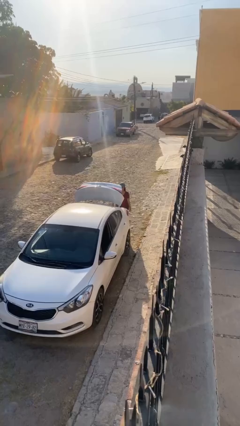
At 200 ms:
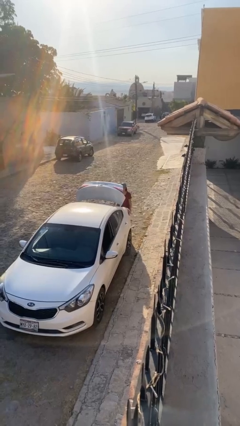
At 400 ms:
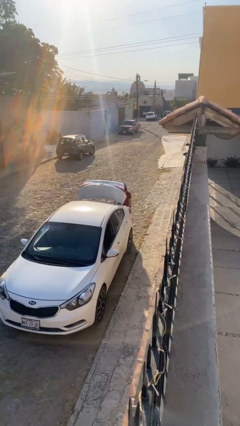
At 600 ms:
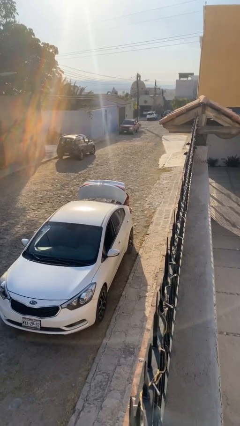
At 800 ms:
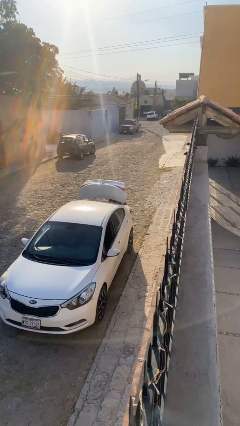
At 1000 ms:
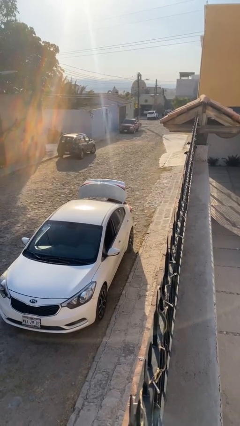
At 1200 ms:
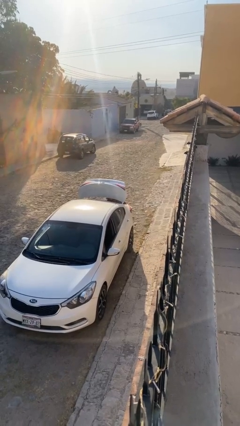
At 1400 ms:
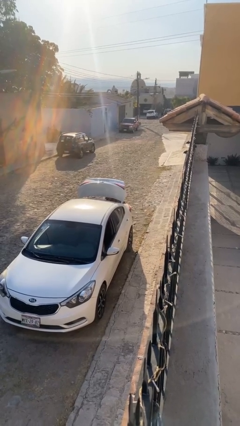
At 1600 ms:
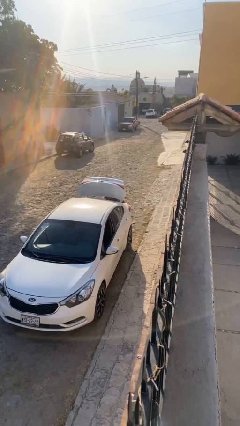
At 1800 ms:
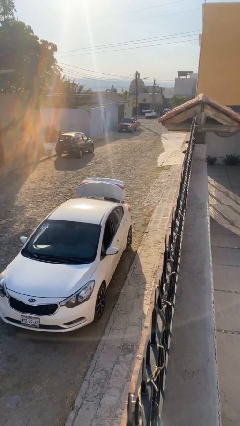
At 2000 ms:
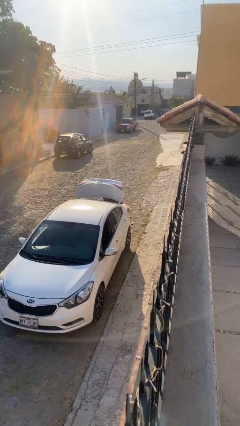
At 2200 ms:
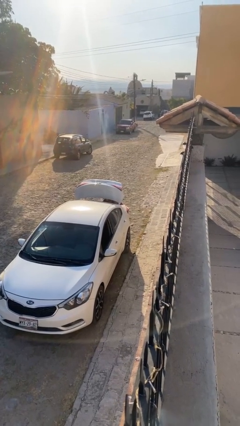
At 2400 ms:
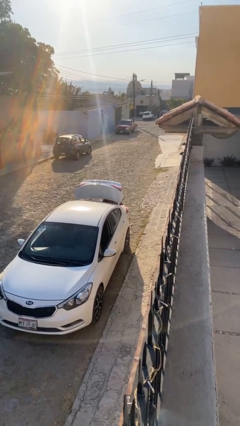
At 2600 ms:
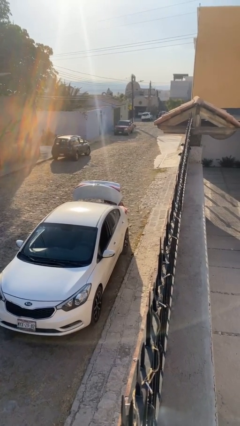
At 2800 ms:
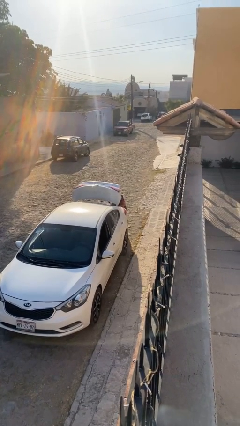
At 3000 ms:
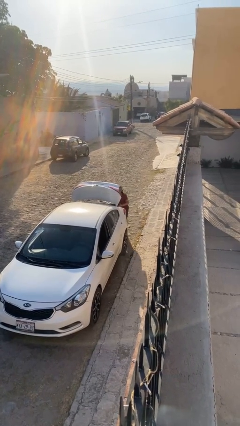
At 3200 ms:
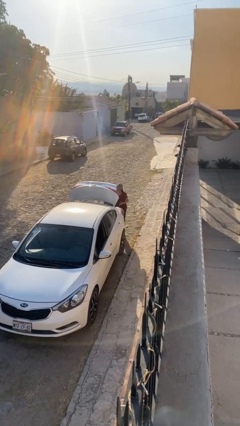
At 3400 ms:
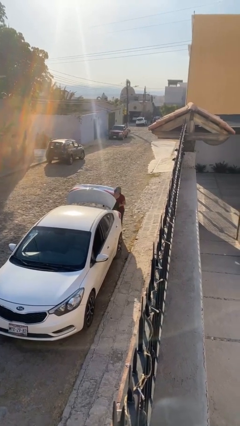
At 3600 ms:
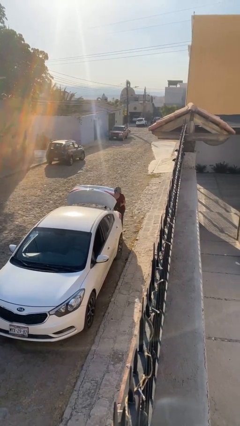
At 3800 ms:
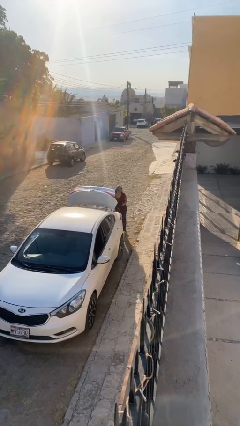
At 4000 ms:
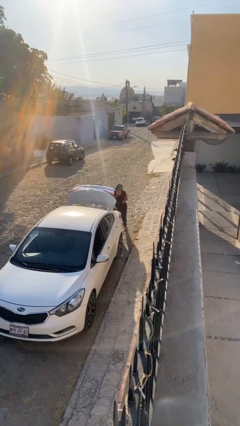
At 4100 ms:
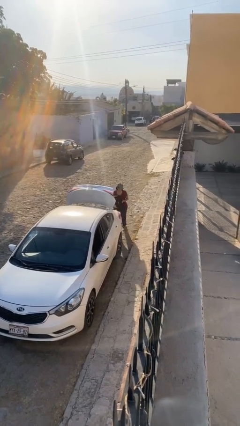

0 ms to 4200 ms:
person unloads car

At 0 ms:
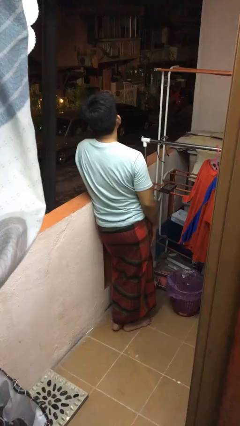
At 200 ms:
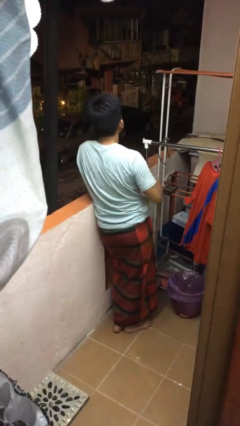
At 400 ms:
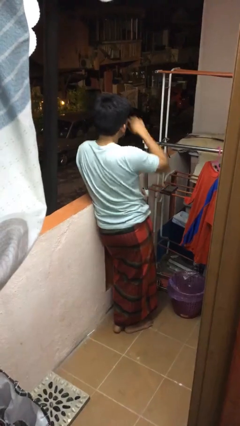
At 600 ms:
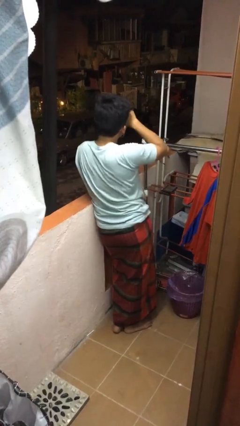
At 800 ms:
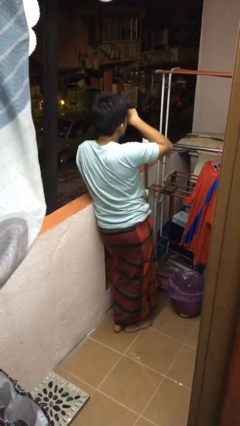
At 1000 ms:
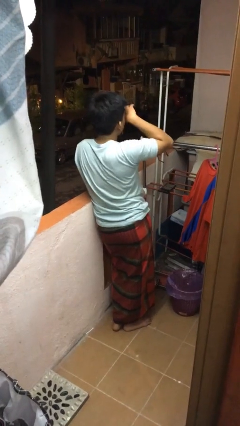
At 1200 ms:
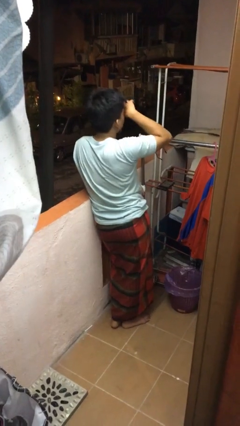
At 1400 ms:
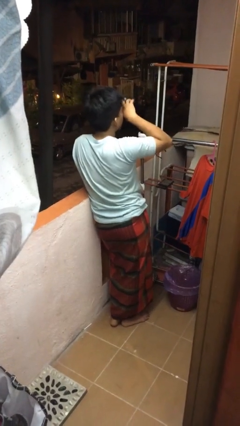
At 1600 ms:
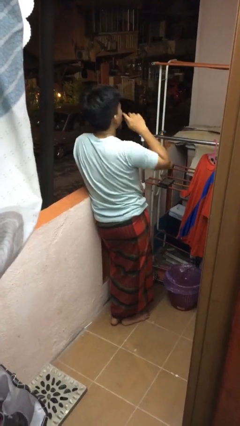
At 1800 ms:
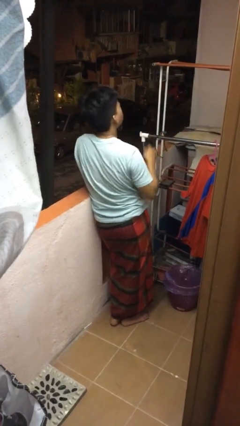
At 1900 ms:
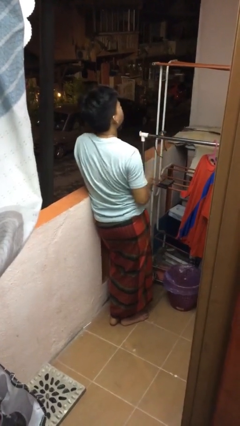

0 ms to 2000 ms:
person rubs eyes

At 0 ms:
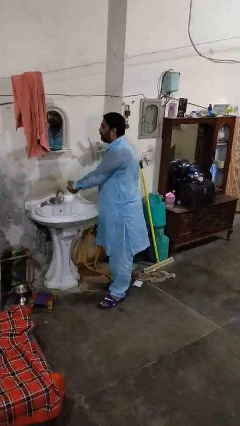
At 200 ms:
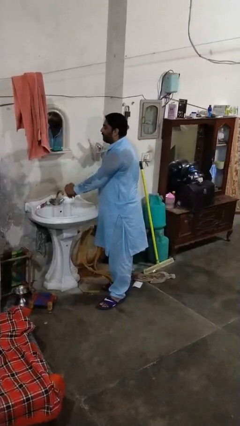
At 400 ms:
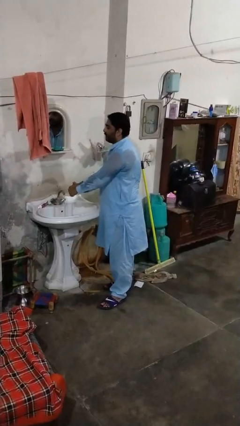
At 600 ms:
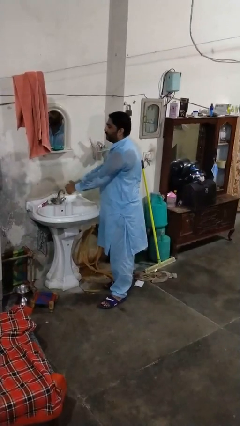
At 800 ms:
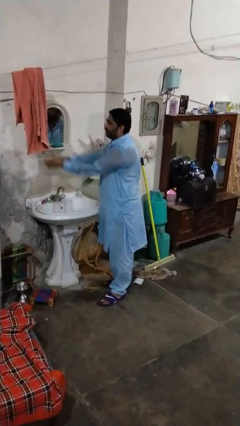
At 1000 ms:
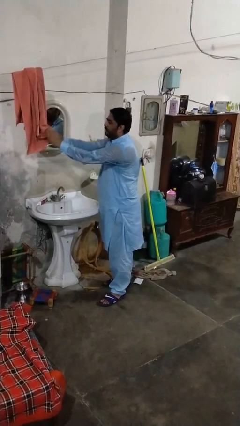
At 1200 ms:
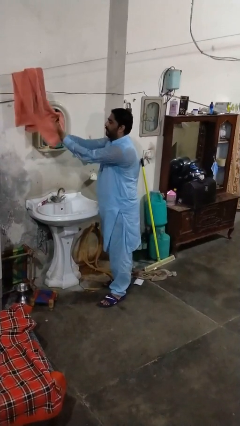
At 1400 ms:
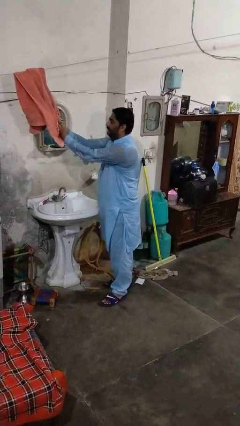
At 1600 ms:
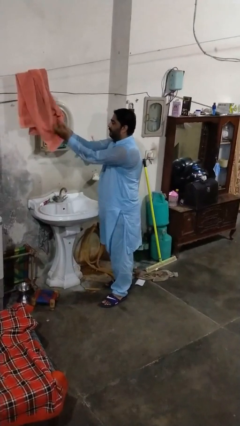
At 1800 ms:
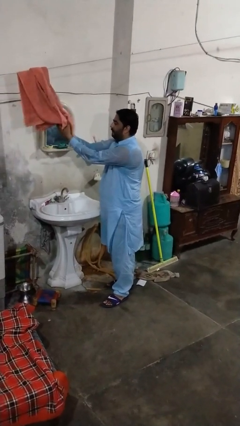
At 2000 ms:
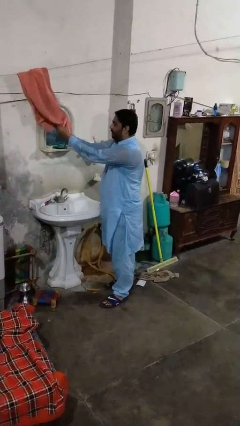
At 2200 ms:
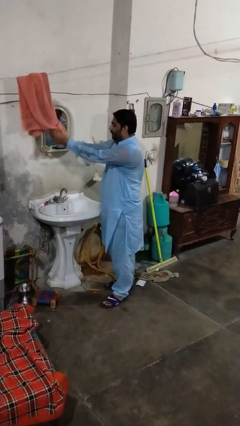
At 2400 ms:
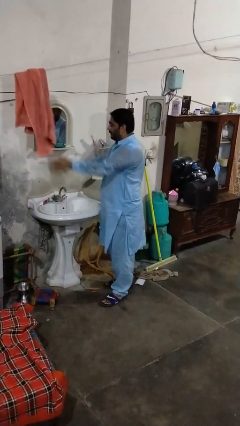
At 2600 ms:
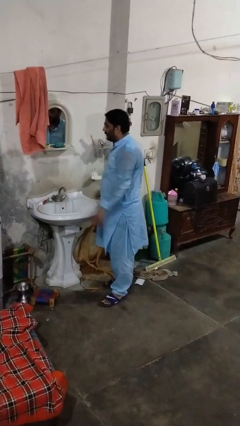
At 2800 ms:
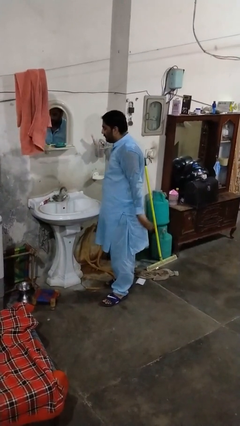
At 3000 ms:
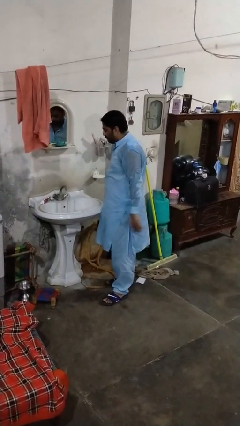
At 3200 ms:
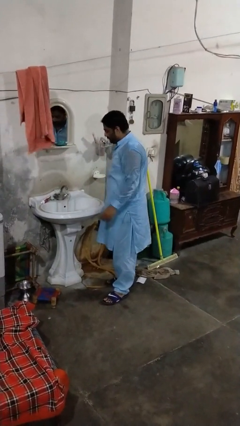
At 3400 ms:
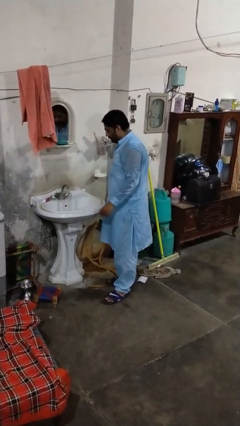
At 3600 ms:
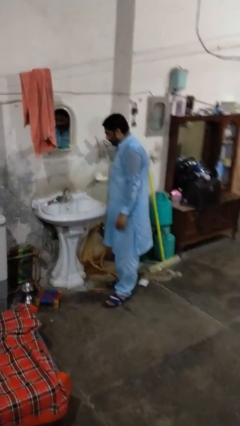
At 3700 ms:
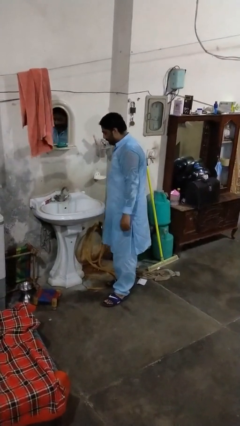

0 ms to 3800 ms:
person dries hands with towel

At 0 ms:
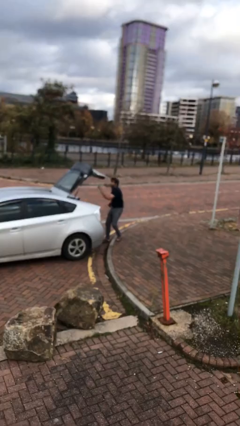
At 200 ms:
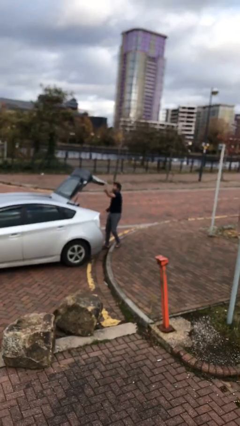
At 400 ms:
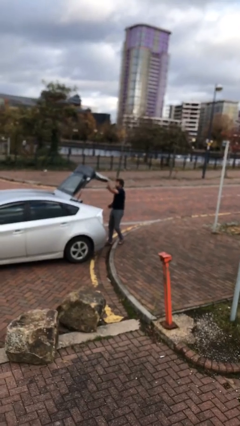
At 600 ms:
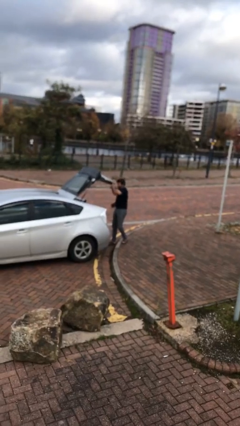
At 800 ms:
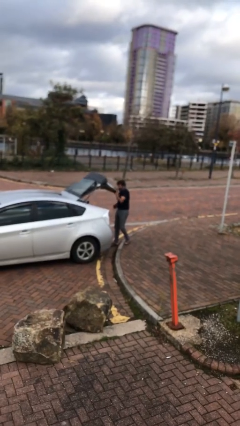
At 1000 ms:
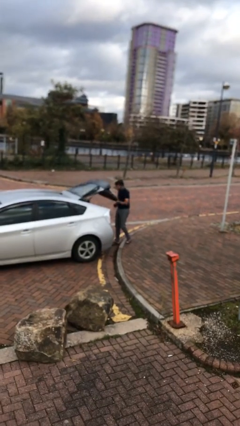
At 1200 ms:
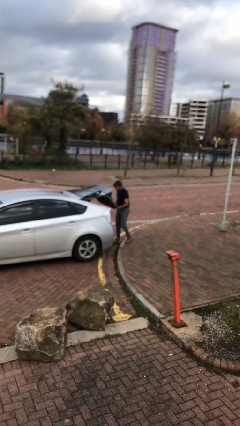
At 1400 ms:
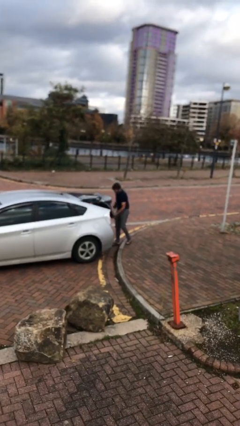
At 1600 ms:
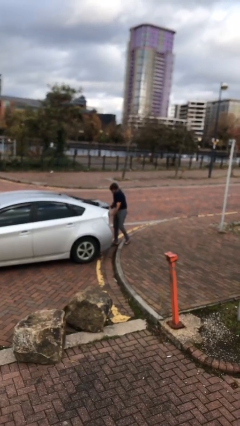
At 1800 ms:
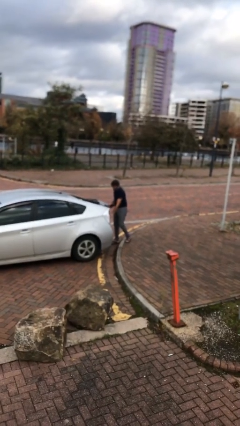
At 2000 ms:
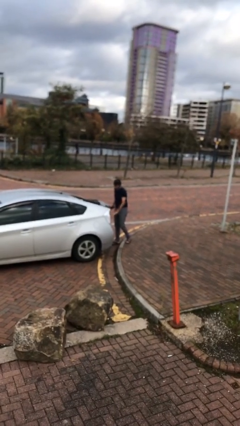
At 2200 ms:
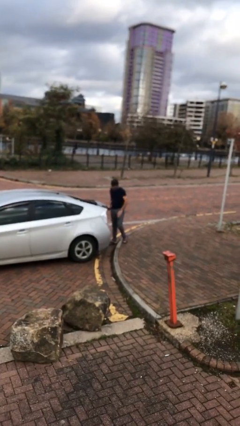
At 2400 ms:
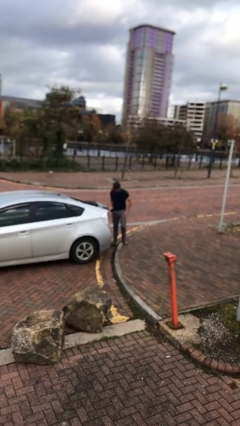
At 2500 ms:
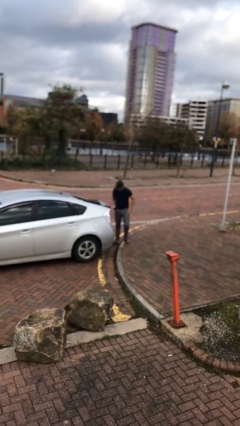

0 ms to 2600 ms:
person closes car trunk

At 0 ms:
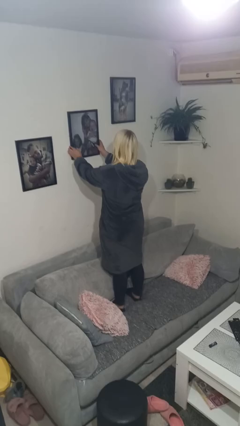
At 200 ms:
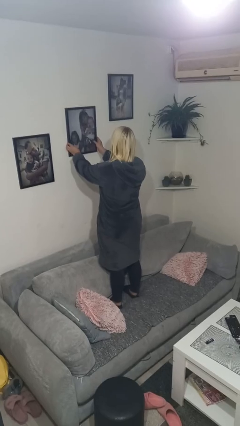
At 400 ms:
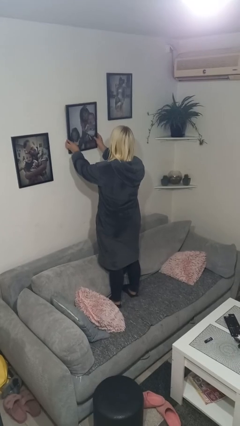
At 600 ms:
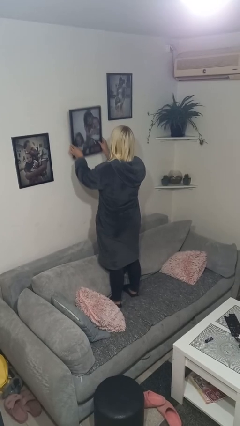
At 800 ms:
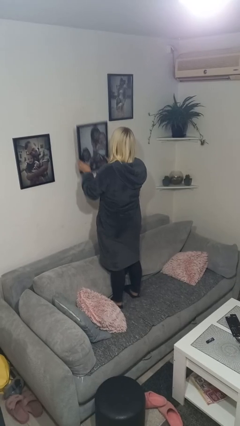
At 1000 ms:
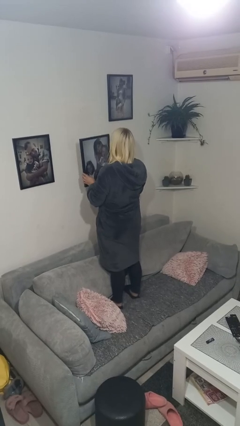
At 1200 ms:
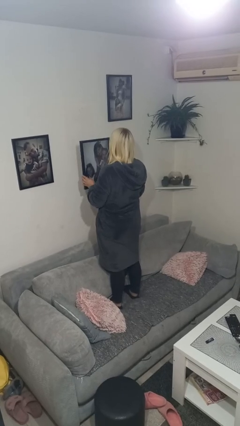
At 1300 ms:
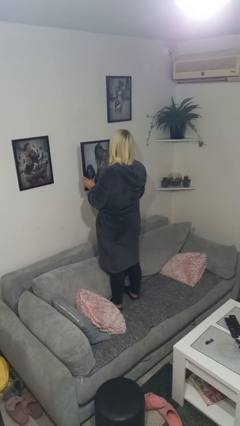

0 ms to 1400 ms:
person takes down picture frame

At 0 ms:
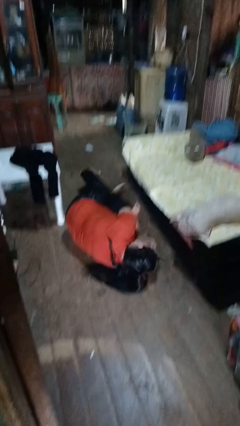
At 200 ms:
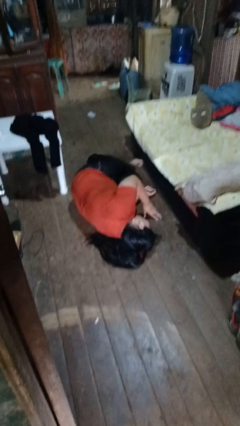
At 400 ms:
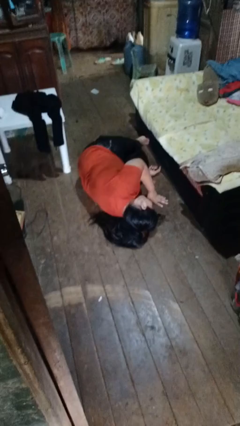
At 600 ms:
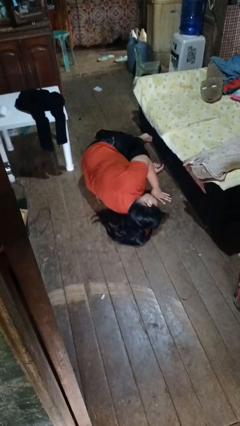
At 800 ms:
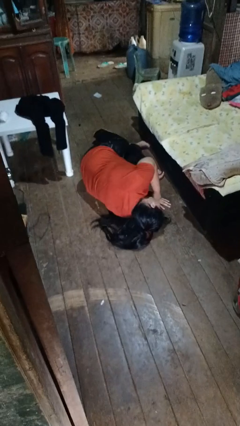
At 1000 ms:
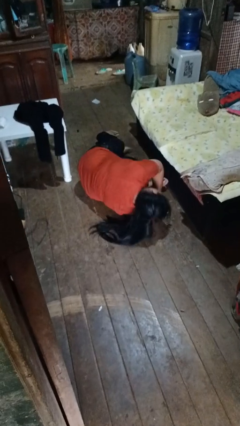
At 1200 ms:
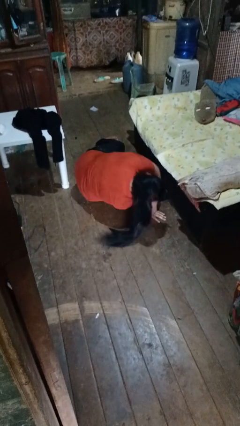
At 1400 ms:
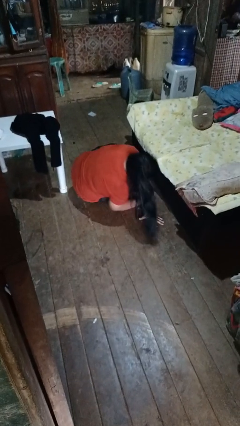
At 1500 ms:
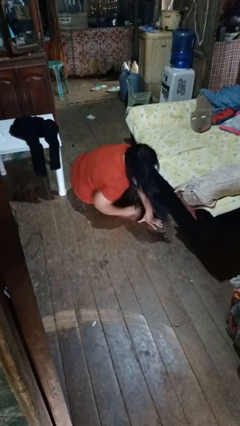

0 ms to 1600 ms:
person lies down on floor

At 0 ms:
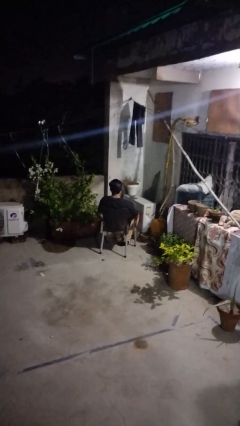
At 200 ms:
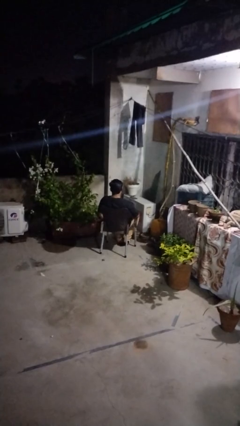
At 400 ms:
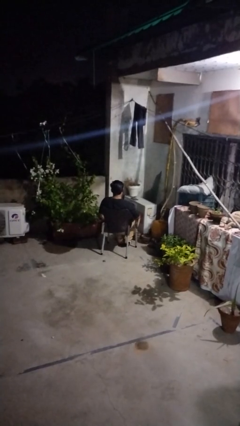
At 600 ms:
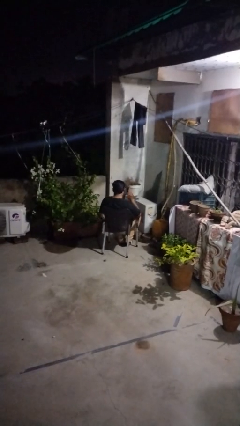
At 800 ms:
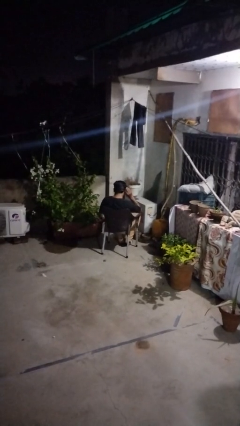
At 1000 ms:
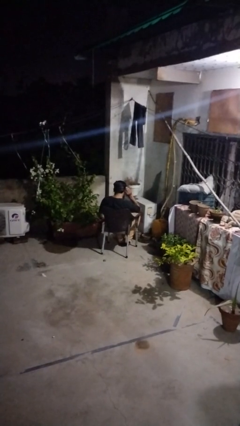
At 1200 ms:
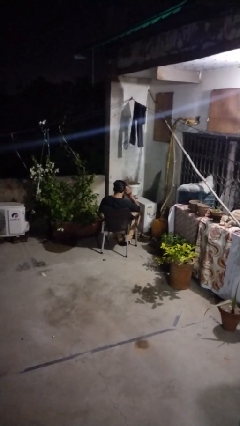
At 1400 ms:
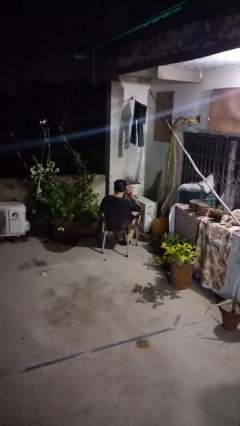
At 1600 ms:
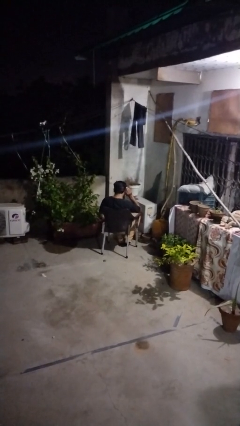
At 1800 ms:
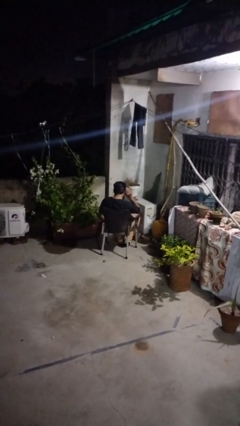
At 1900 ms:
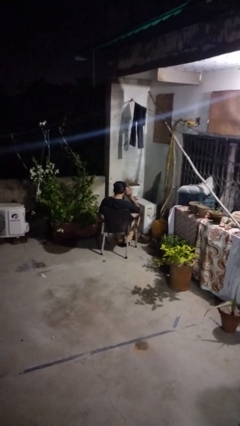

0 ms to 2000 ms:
person gestures listen closely
